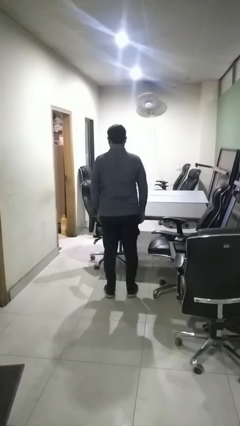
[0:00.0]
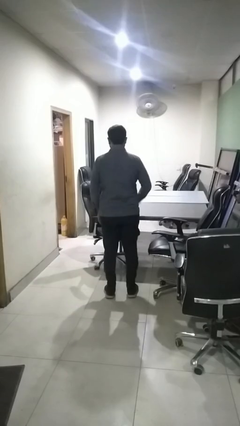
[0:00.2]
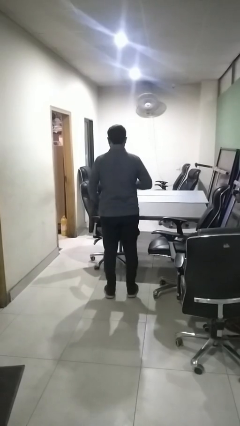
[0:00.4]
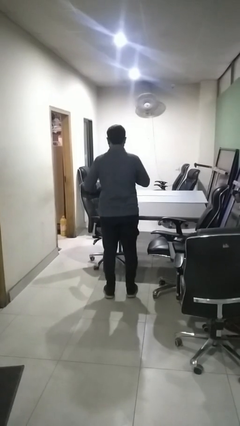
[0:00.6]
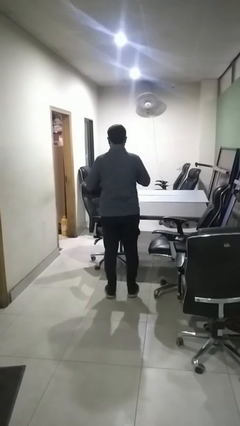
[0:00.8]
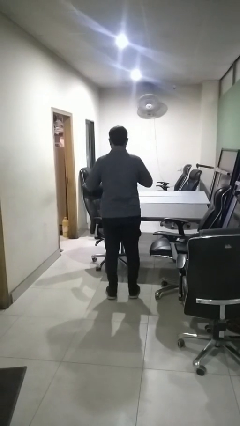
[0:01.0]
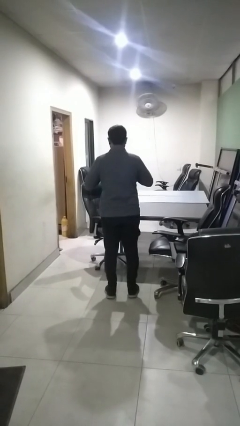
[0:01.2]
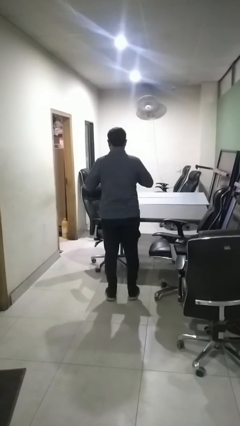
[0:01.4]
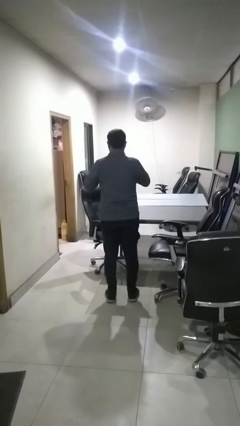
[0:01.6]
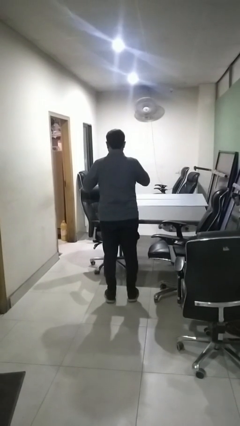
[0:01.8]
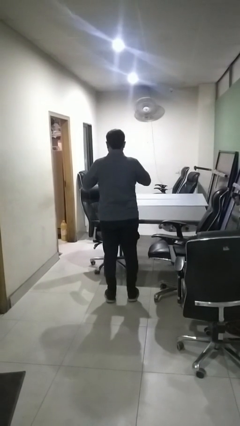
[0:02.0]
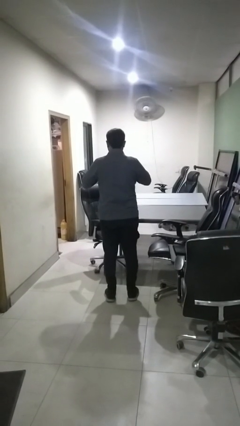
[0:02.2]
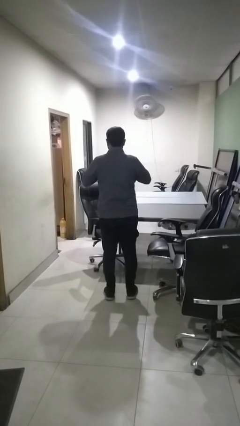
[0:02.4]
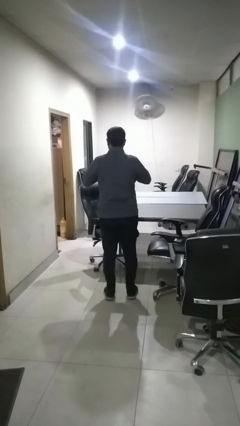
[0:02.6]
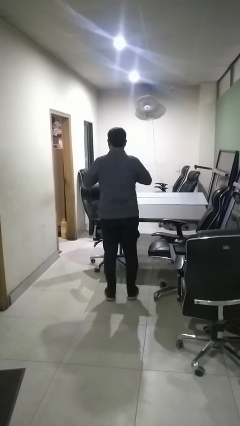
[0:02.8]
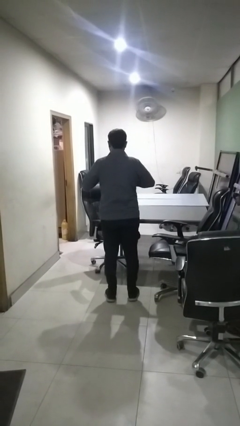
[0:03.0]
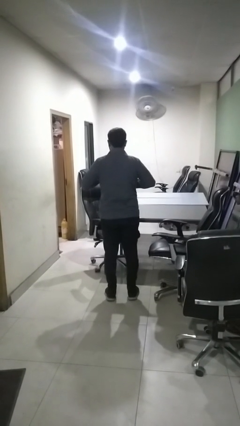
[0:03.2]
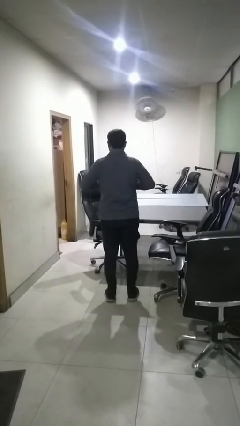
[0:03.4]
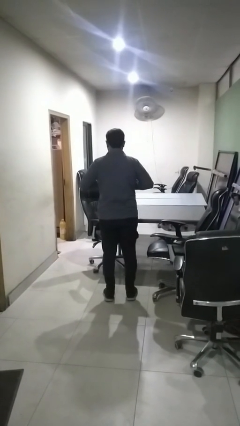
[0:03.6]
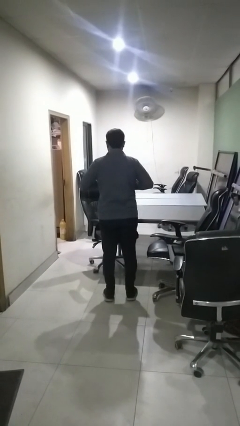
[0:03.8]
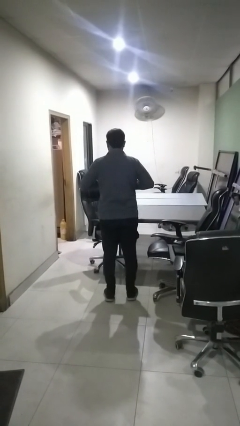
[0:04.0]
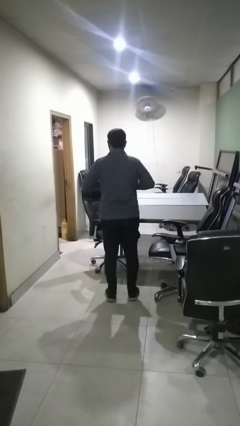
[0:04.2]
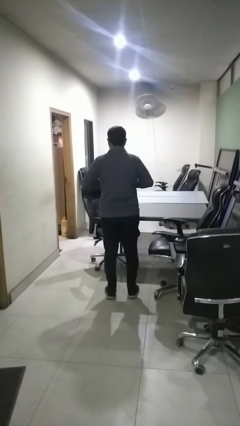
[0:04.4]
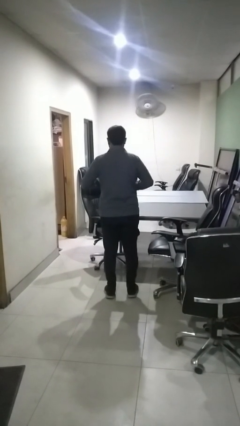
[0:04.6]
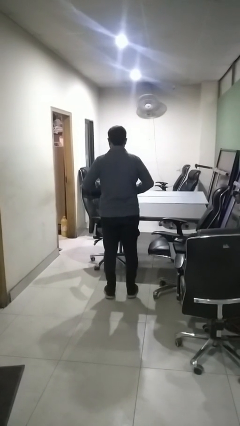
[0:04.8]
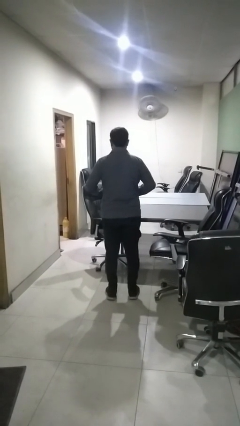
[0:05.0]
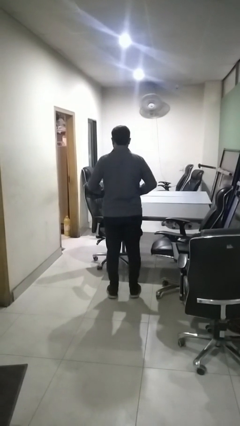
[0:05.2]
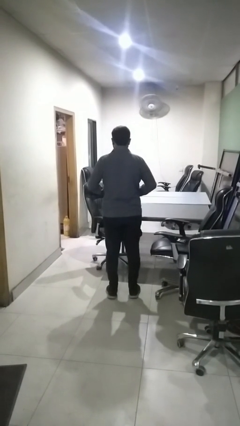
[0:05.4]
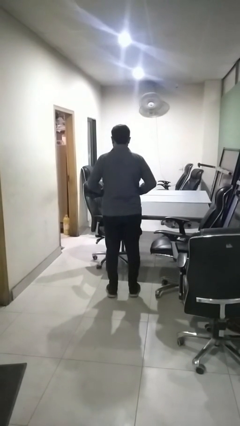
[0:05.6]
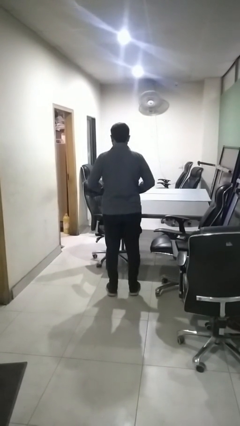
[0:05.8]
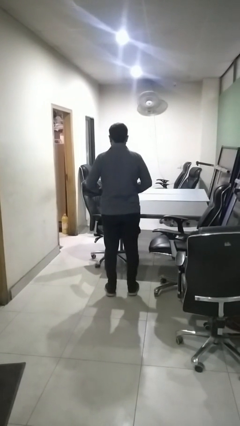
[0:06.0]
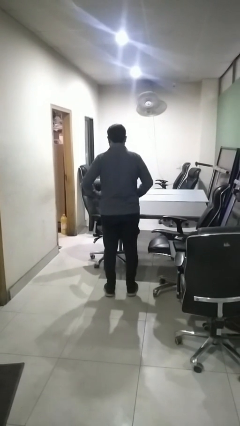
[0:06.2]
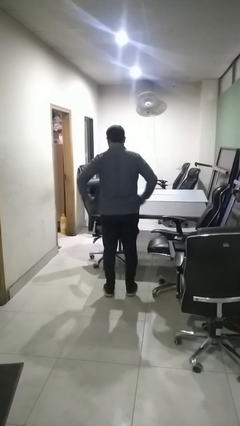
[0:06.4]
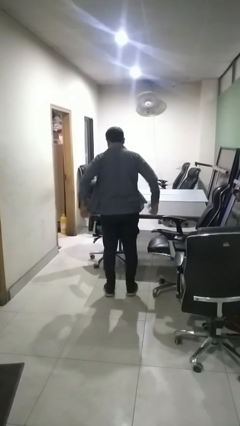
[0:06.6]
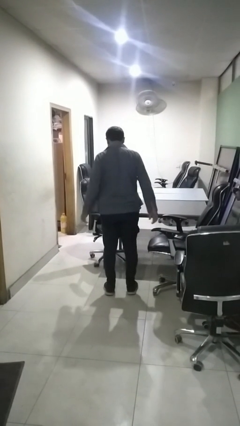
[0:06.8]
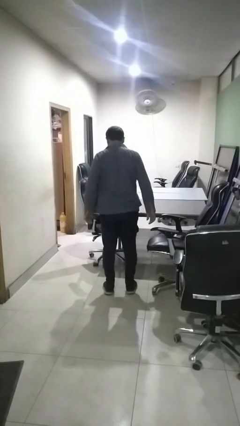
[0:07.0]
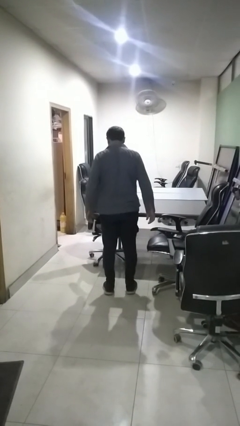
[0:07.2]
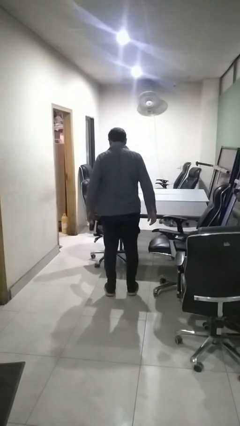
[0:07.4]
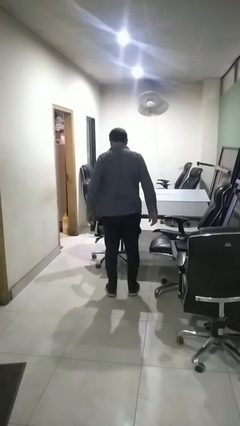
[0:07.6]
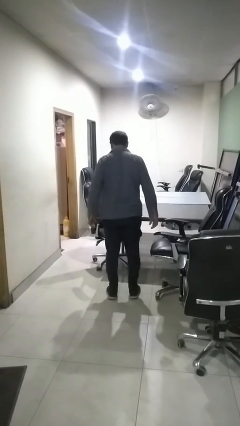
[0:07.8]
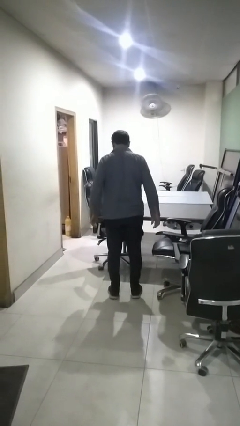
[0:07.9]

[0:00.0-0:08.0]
person unbuttons shirt

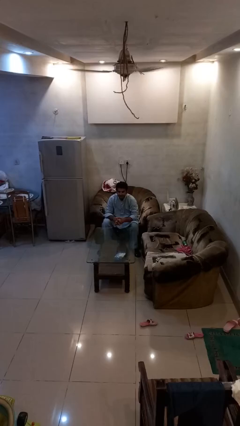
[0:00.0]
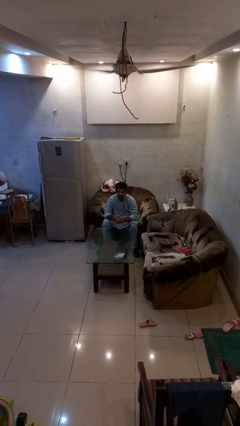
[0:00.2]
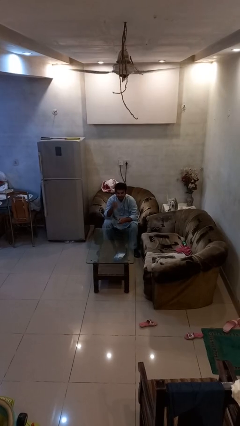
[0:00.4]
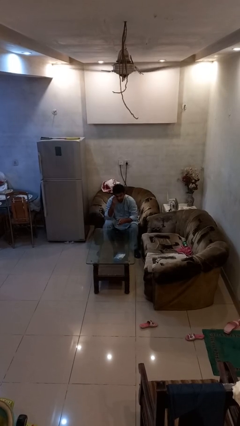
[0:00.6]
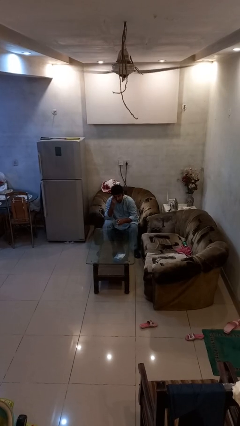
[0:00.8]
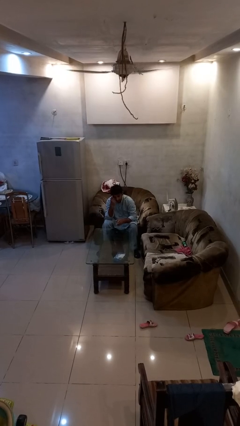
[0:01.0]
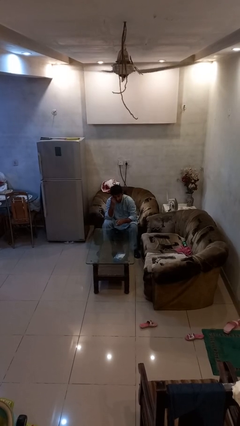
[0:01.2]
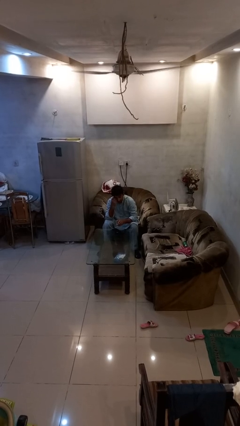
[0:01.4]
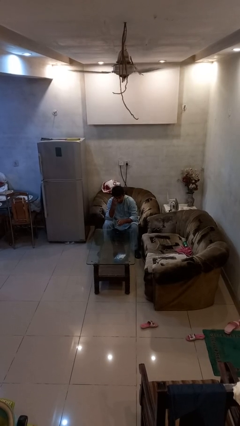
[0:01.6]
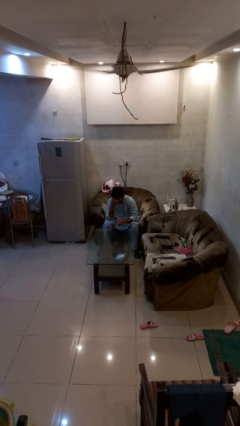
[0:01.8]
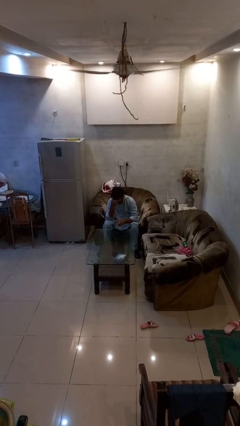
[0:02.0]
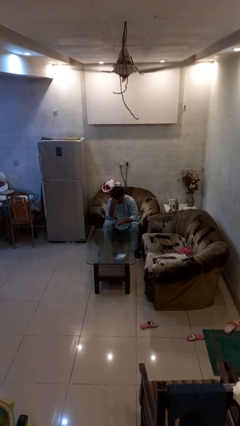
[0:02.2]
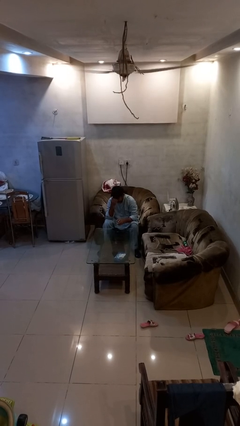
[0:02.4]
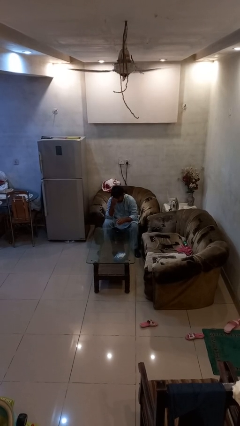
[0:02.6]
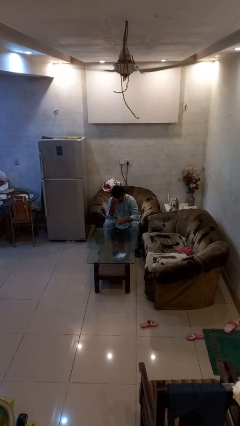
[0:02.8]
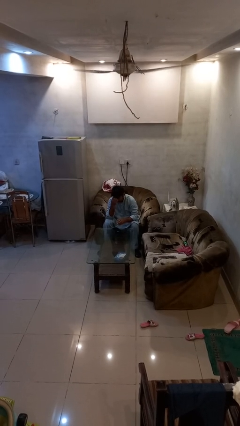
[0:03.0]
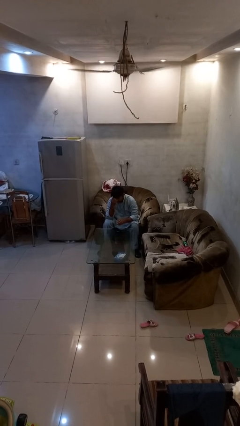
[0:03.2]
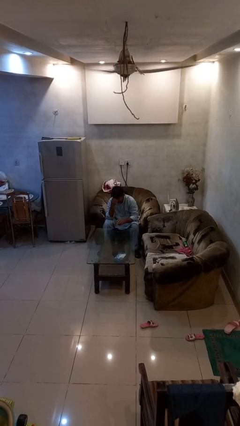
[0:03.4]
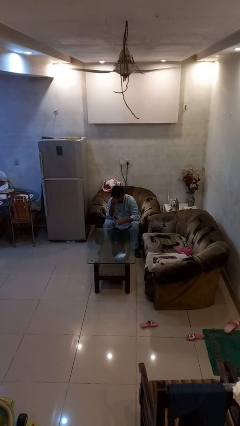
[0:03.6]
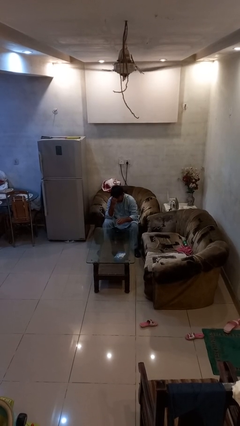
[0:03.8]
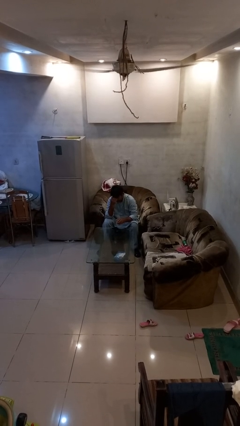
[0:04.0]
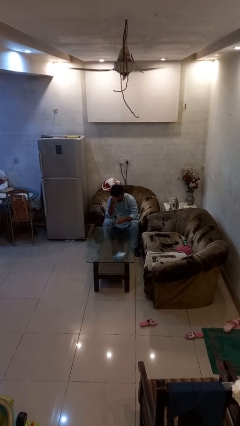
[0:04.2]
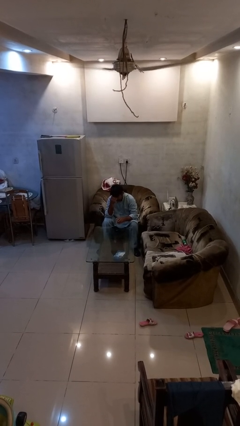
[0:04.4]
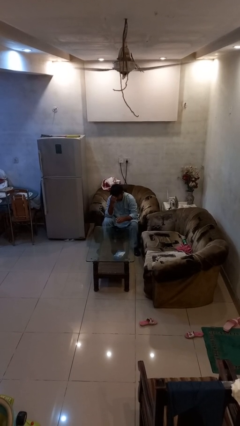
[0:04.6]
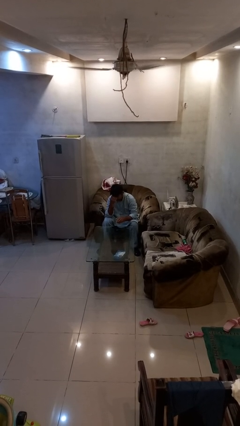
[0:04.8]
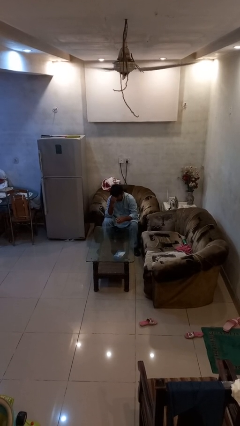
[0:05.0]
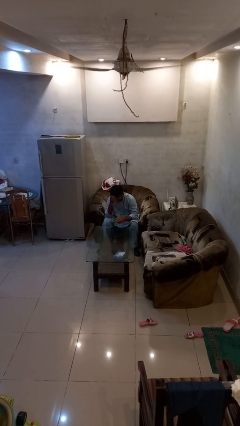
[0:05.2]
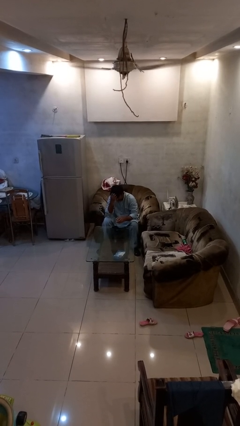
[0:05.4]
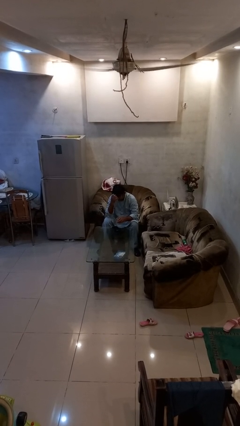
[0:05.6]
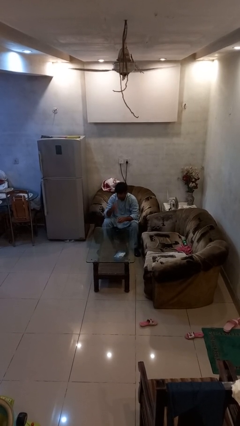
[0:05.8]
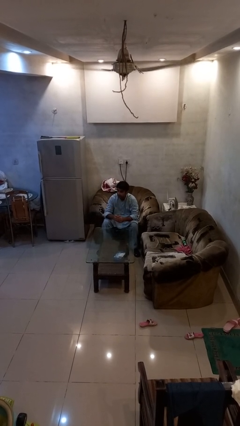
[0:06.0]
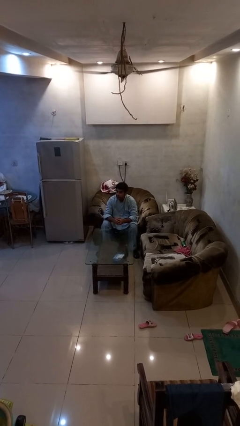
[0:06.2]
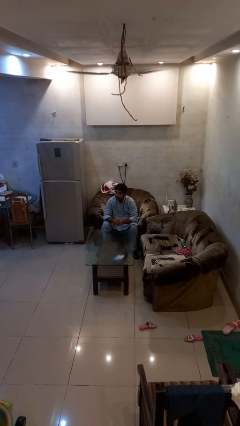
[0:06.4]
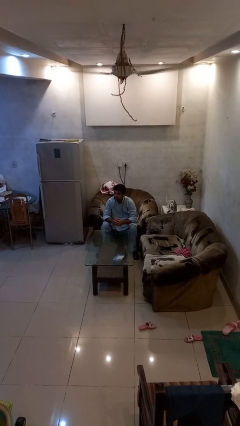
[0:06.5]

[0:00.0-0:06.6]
person scratches face

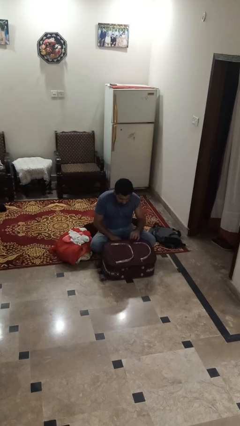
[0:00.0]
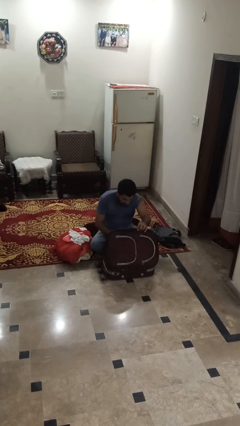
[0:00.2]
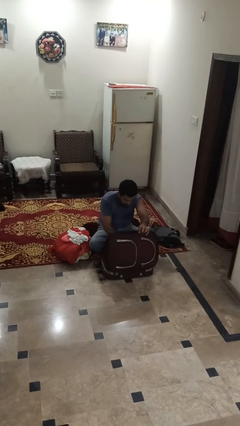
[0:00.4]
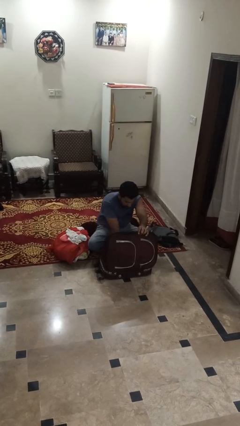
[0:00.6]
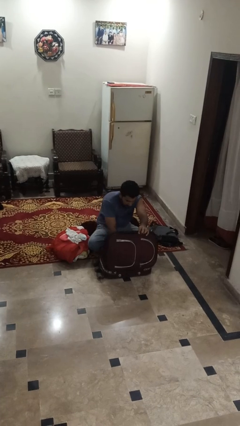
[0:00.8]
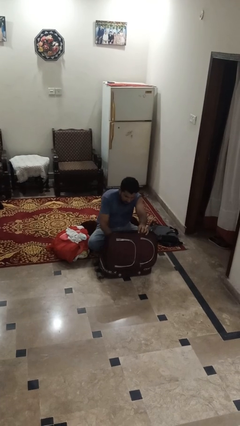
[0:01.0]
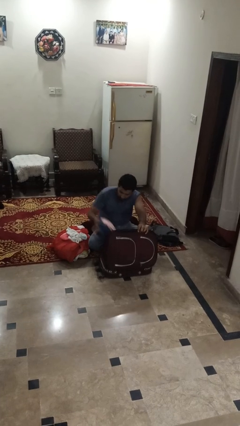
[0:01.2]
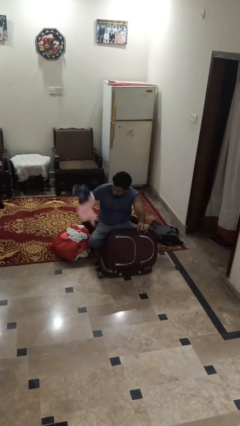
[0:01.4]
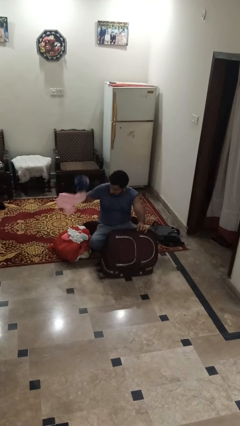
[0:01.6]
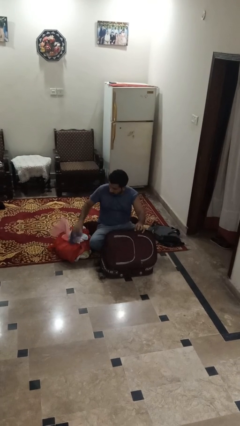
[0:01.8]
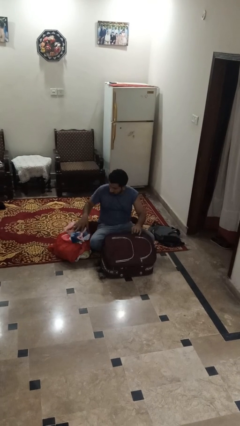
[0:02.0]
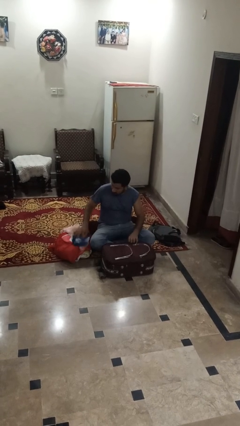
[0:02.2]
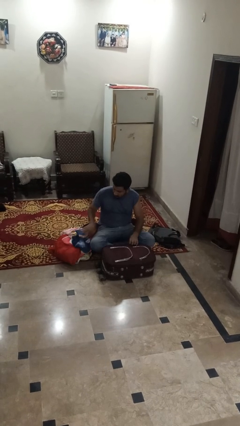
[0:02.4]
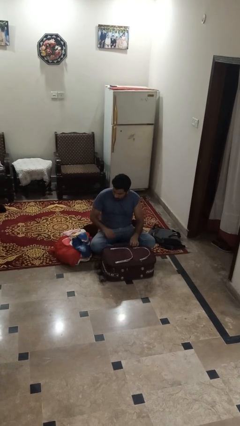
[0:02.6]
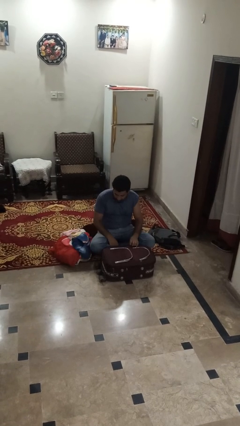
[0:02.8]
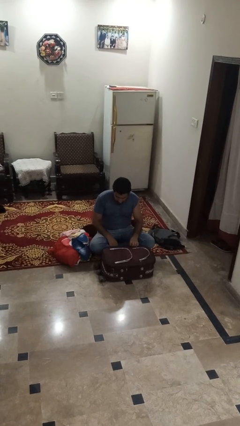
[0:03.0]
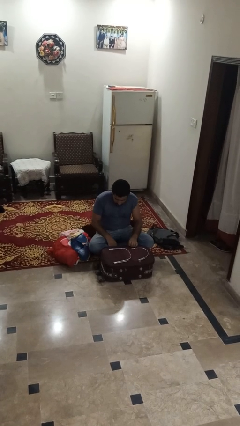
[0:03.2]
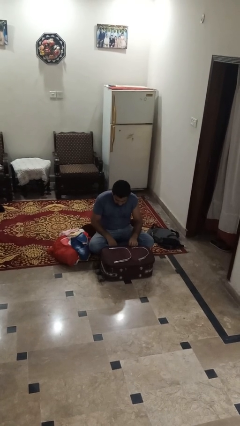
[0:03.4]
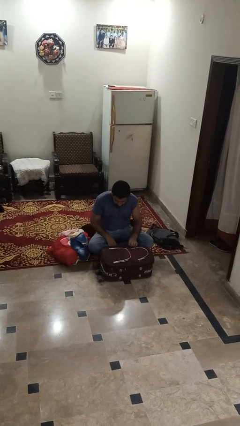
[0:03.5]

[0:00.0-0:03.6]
person unloads clothes from suitcase
